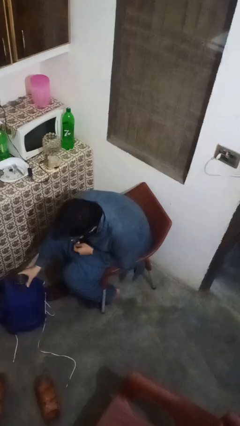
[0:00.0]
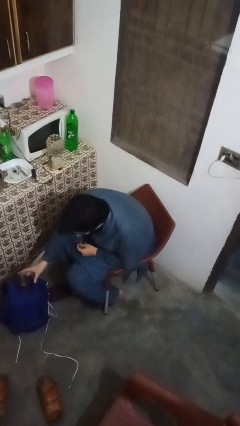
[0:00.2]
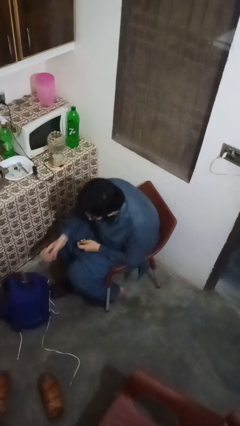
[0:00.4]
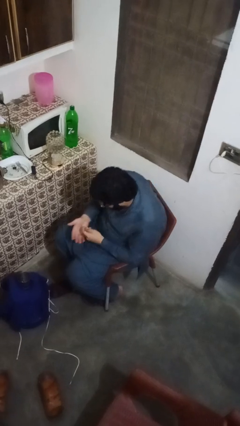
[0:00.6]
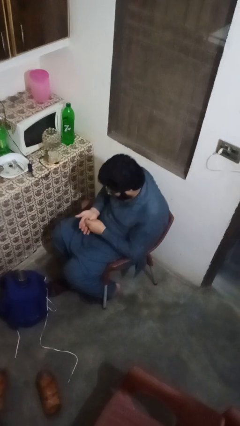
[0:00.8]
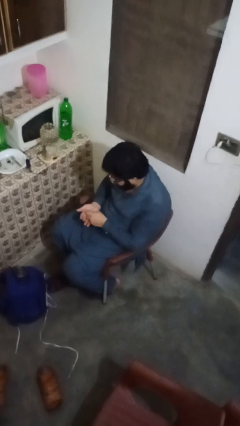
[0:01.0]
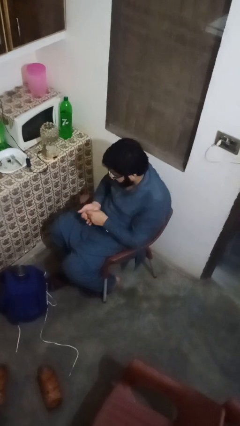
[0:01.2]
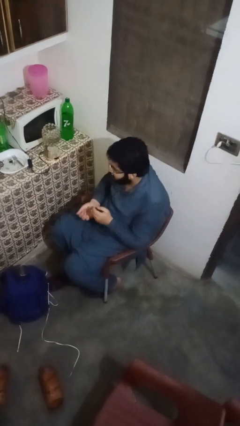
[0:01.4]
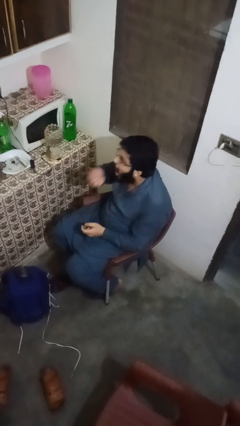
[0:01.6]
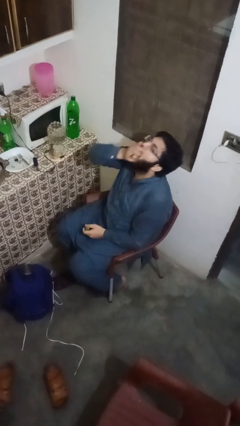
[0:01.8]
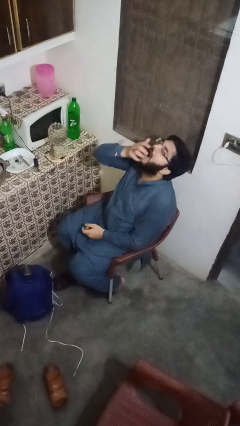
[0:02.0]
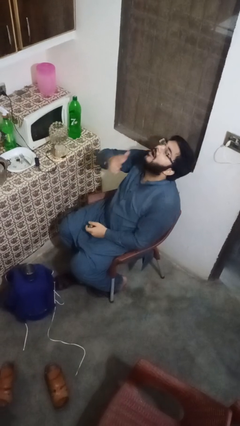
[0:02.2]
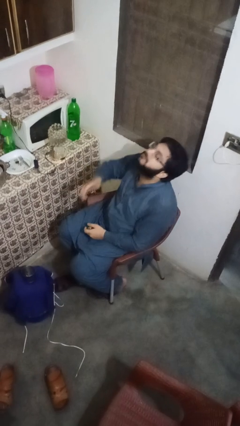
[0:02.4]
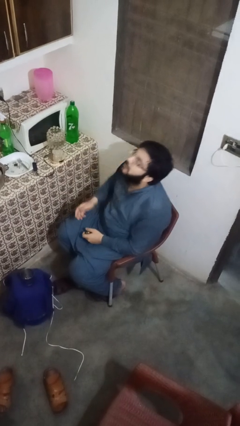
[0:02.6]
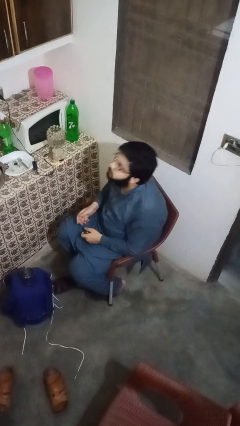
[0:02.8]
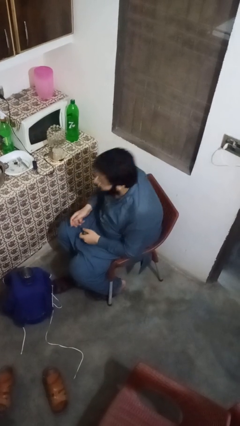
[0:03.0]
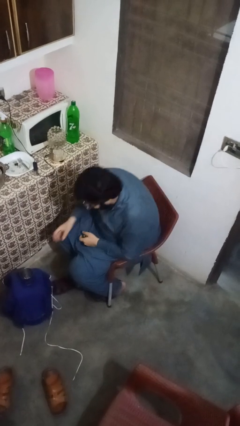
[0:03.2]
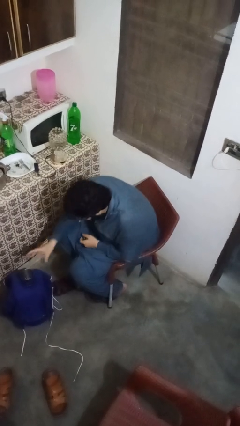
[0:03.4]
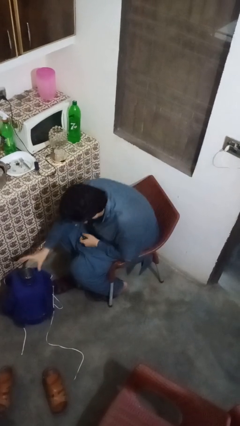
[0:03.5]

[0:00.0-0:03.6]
person takes medicine pills

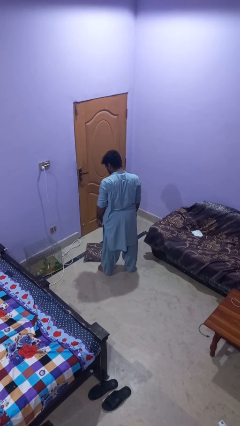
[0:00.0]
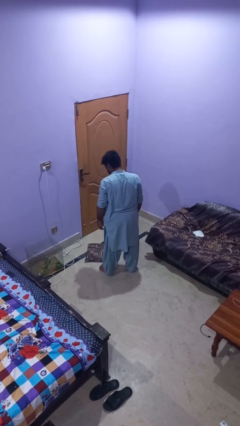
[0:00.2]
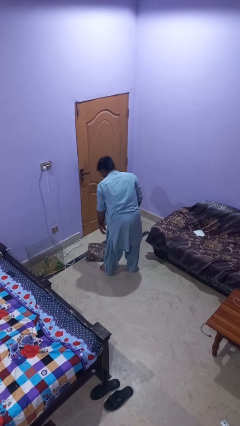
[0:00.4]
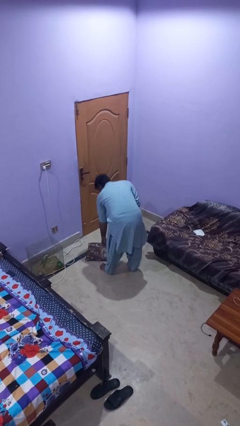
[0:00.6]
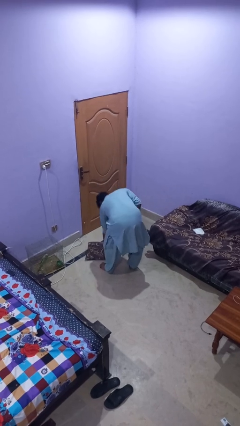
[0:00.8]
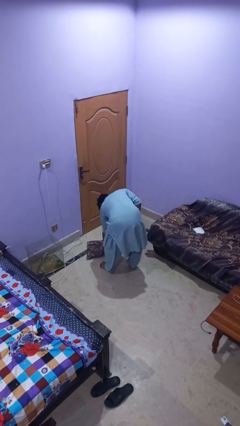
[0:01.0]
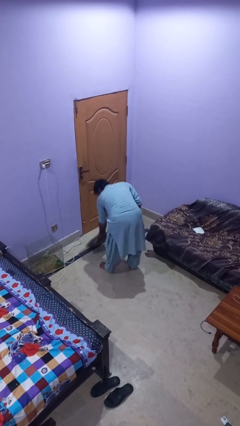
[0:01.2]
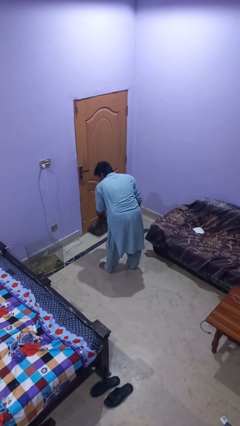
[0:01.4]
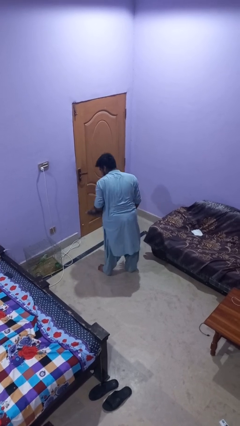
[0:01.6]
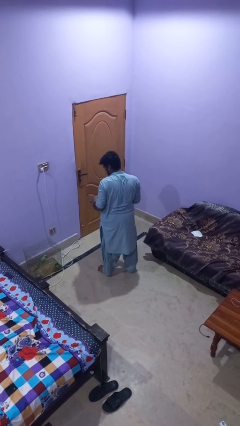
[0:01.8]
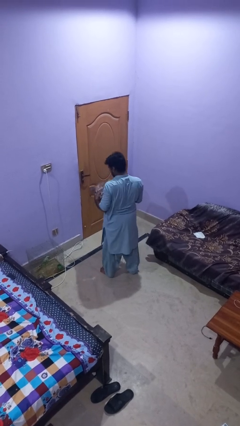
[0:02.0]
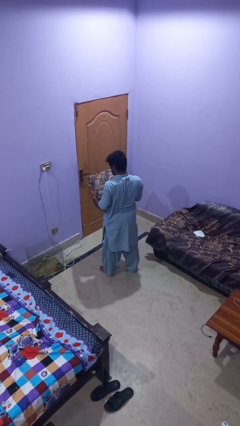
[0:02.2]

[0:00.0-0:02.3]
person picks up object from floor

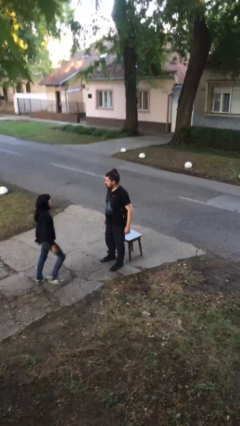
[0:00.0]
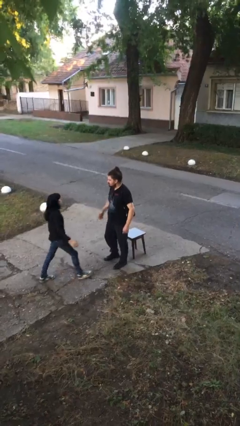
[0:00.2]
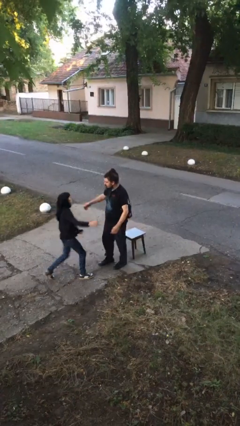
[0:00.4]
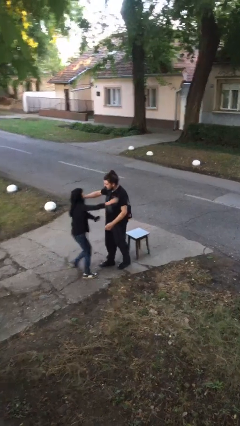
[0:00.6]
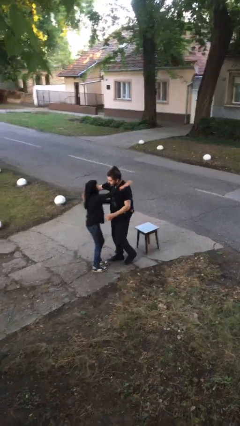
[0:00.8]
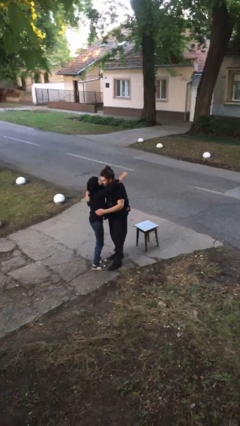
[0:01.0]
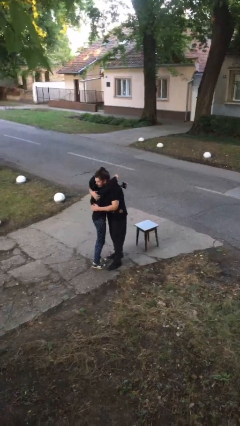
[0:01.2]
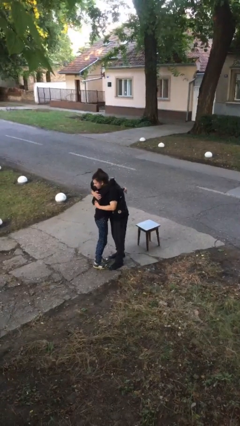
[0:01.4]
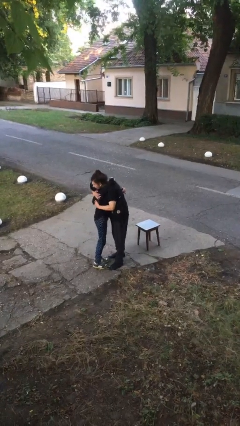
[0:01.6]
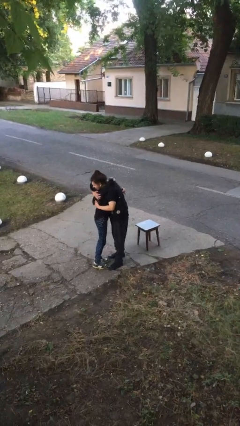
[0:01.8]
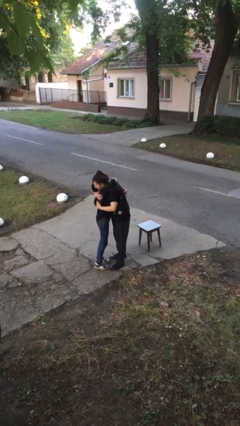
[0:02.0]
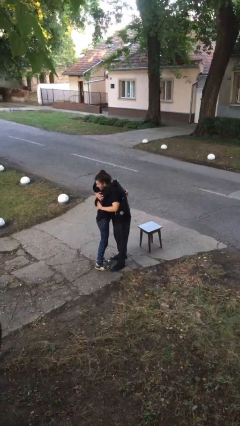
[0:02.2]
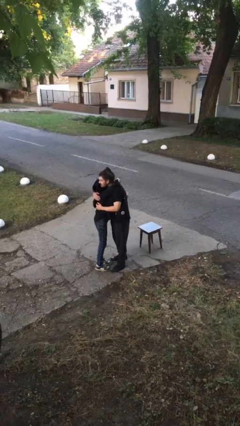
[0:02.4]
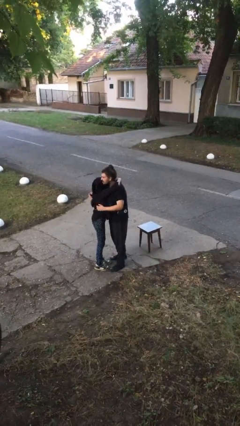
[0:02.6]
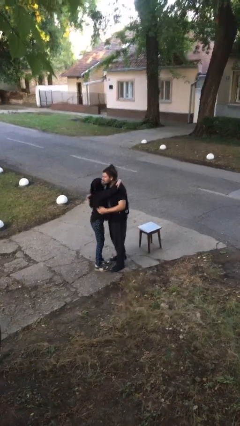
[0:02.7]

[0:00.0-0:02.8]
person embraces person

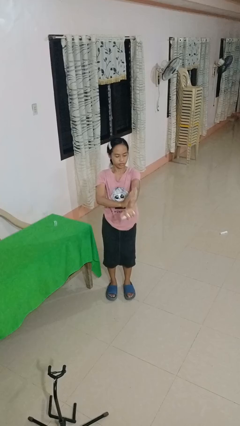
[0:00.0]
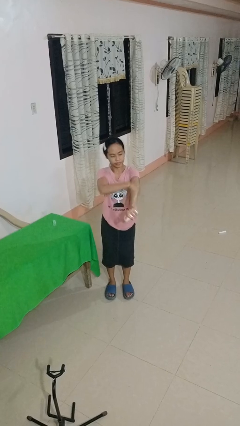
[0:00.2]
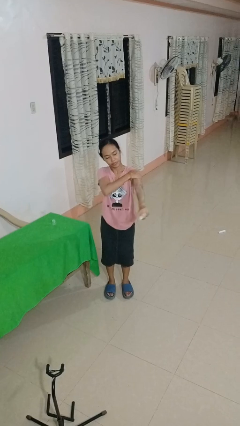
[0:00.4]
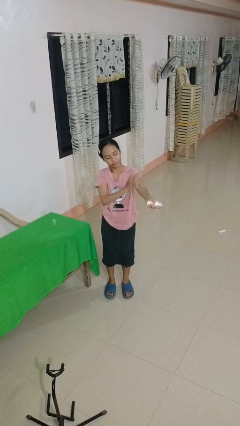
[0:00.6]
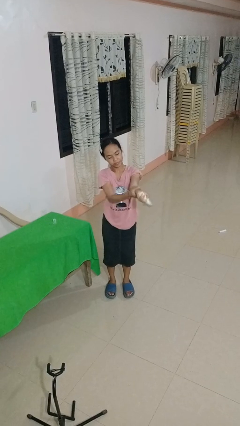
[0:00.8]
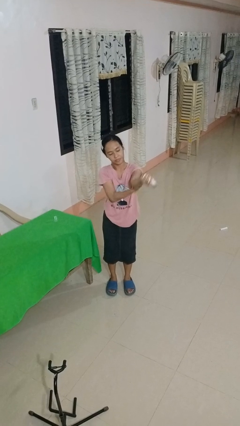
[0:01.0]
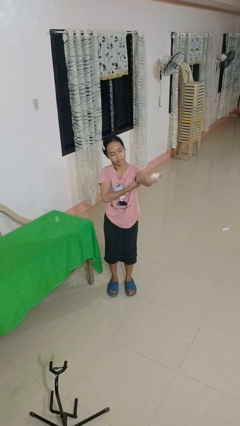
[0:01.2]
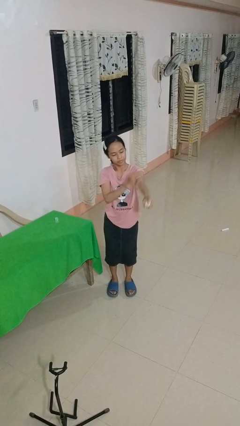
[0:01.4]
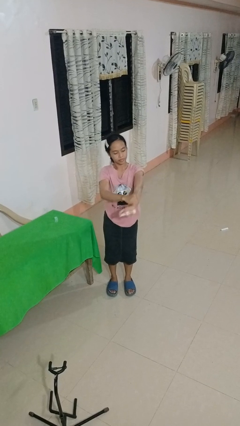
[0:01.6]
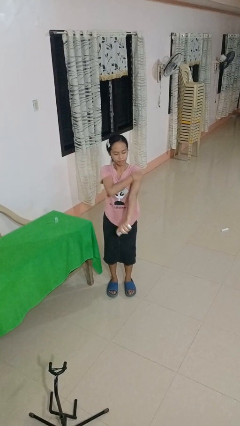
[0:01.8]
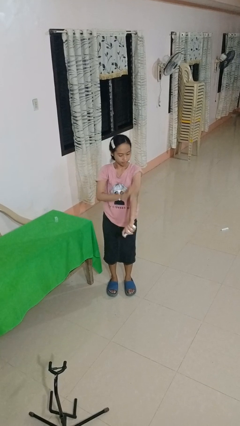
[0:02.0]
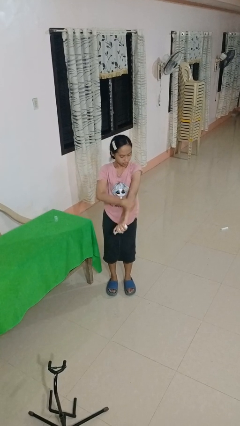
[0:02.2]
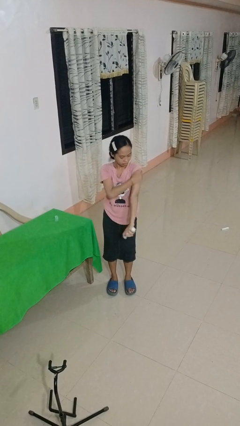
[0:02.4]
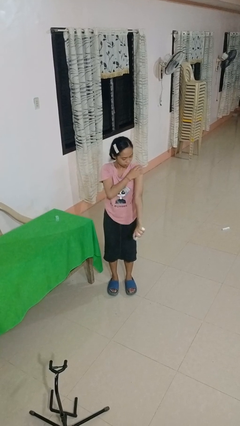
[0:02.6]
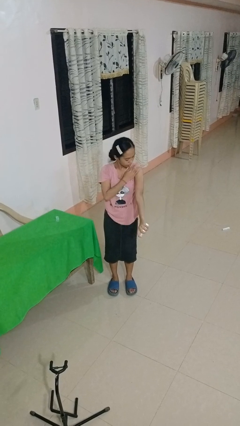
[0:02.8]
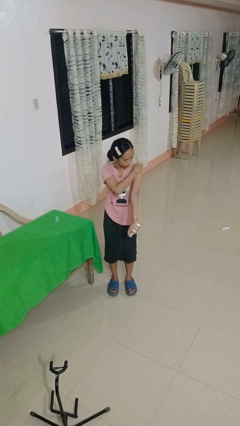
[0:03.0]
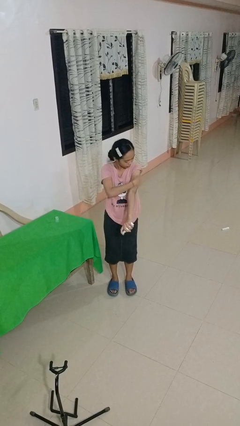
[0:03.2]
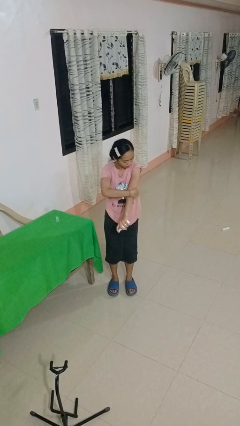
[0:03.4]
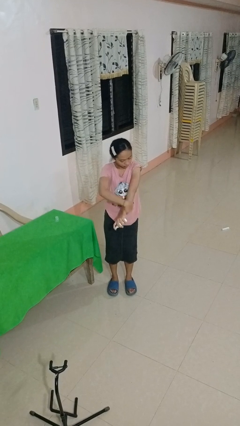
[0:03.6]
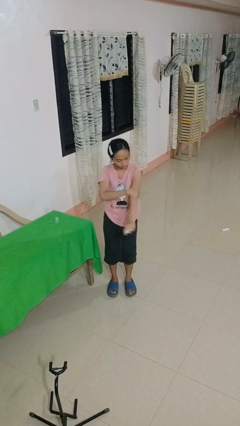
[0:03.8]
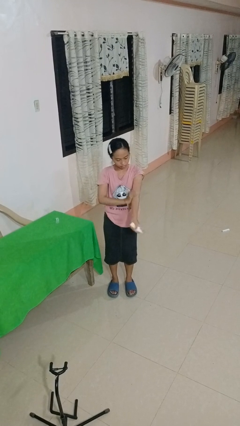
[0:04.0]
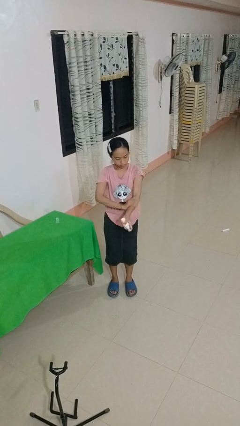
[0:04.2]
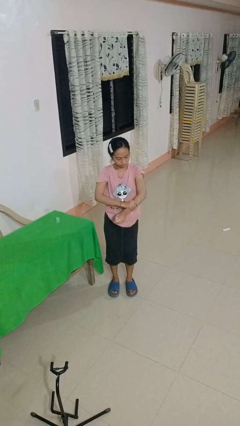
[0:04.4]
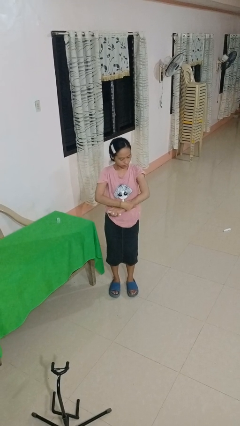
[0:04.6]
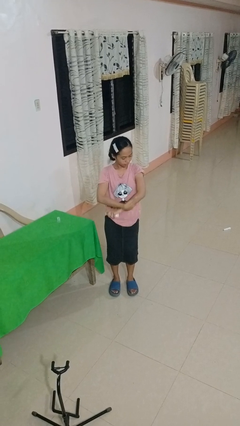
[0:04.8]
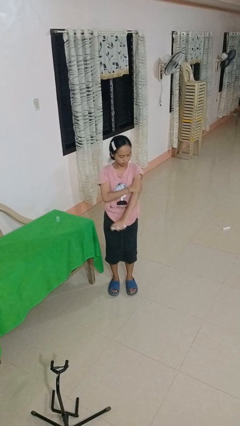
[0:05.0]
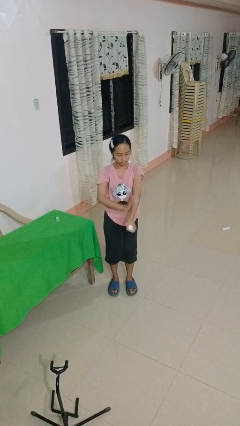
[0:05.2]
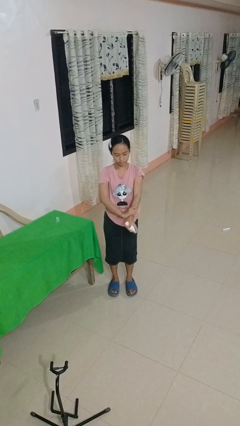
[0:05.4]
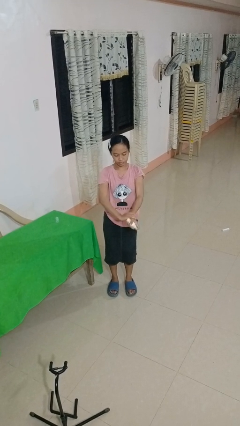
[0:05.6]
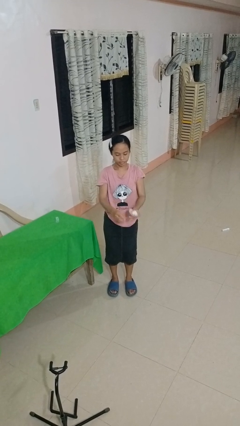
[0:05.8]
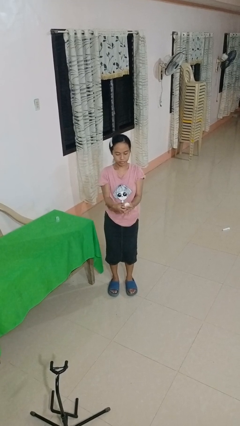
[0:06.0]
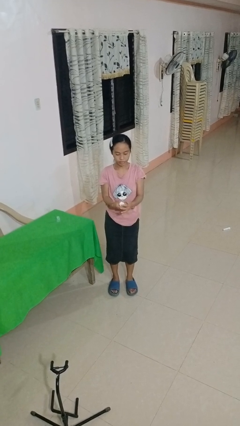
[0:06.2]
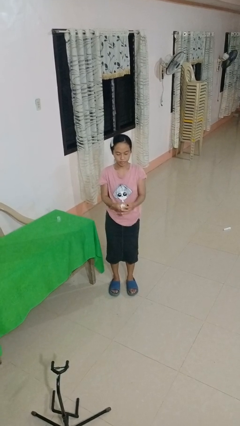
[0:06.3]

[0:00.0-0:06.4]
person applies sunscreen

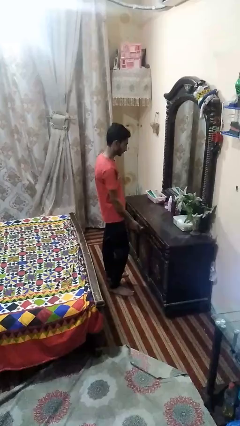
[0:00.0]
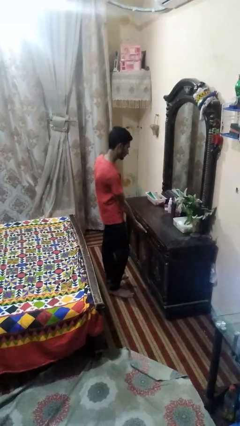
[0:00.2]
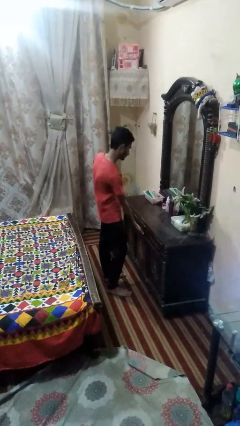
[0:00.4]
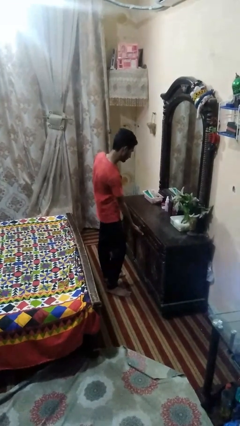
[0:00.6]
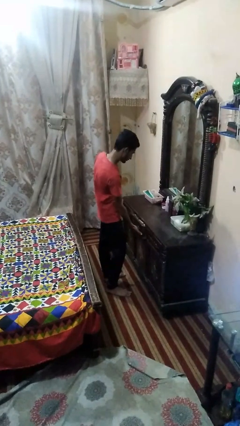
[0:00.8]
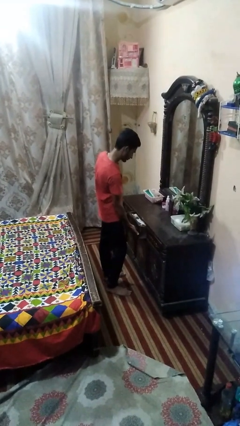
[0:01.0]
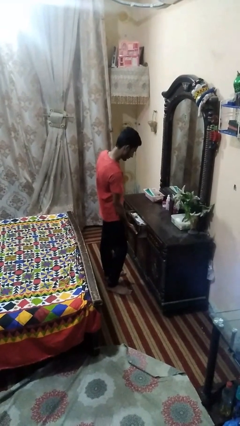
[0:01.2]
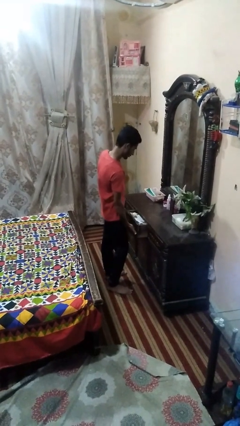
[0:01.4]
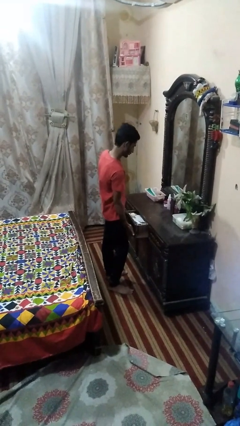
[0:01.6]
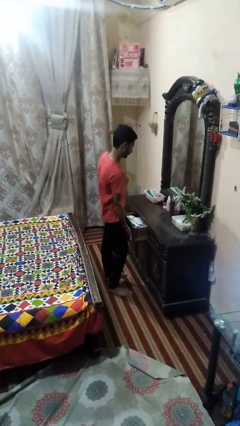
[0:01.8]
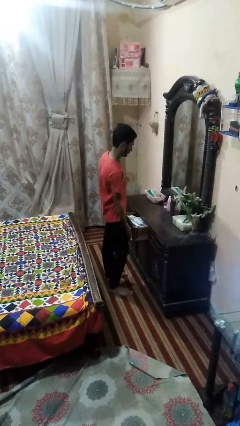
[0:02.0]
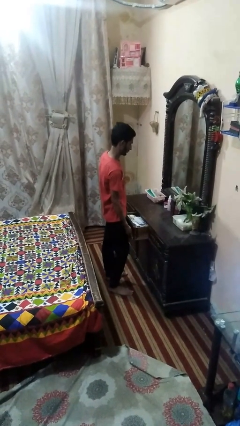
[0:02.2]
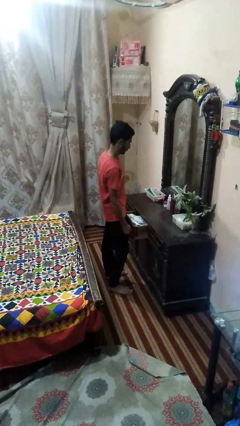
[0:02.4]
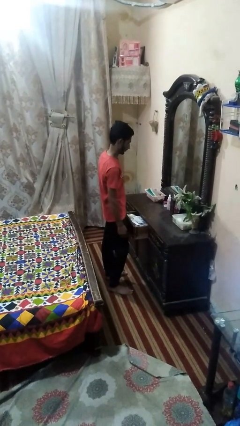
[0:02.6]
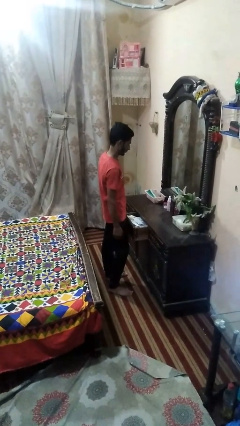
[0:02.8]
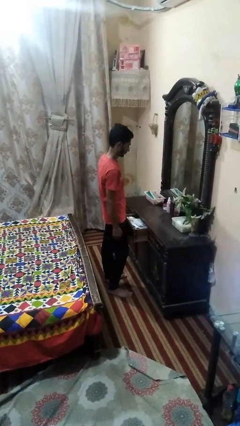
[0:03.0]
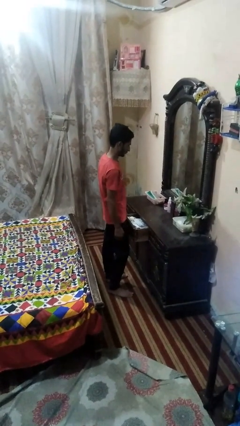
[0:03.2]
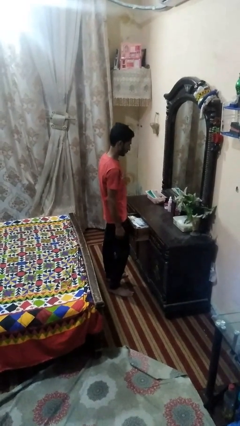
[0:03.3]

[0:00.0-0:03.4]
person opens dresser drawer
